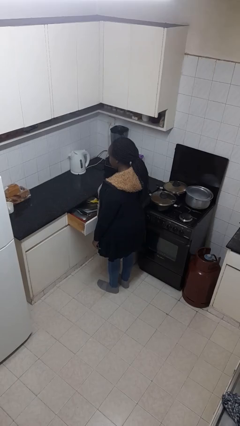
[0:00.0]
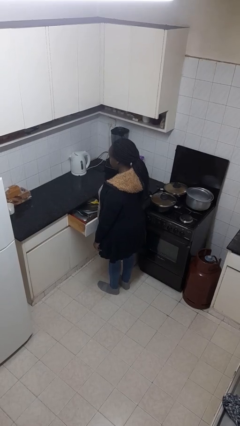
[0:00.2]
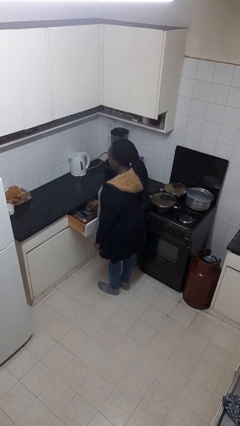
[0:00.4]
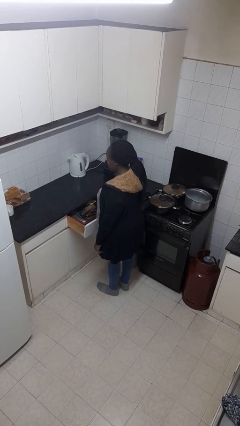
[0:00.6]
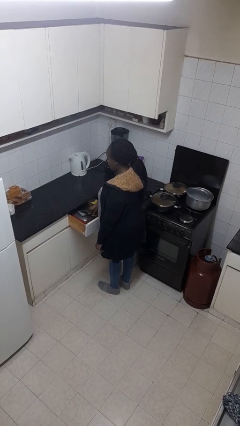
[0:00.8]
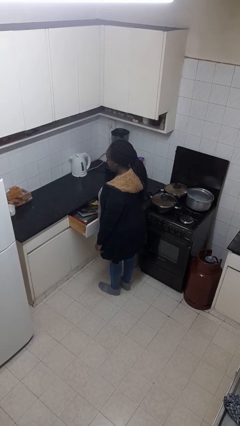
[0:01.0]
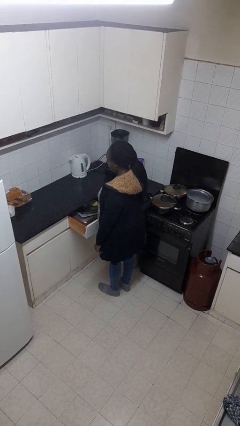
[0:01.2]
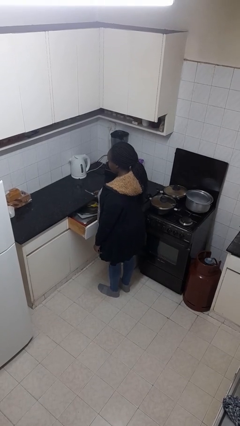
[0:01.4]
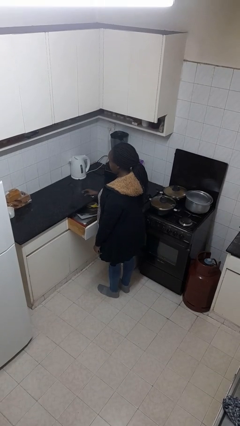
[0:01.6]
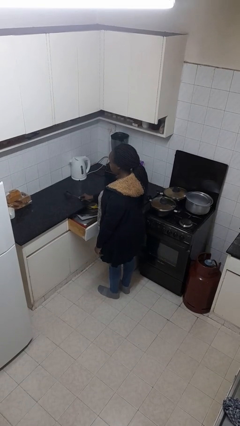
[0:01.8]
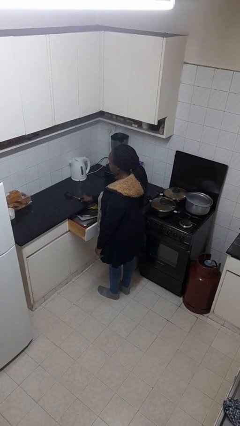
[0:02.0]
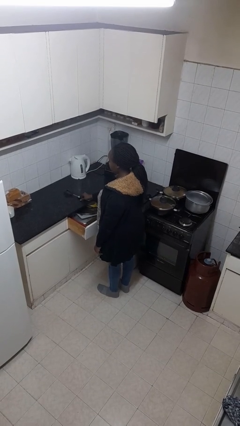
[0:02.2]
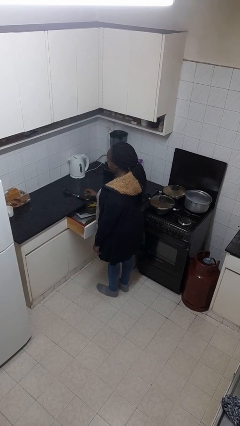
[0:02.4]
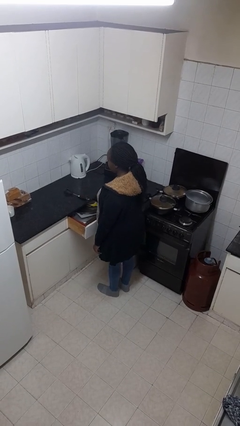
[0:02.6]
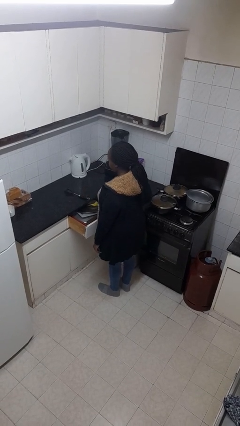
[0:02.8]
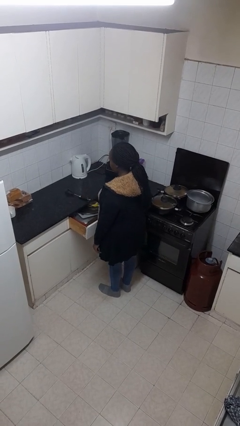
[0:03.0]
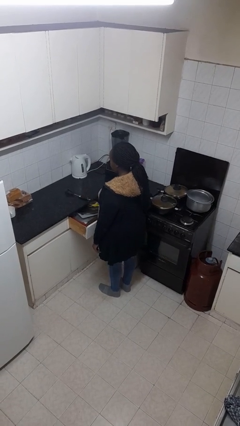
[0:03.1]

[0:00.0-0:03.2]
person takes object from kitchen drawer

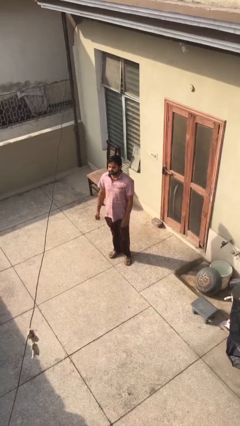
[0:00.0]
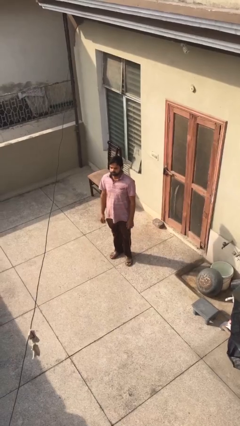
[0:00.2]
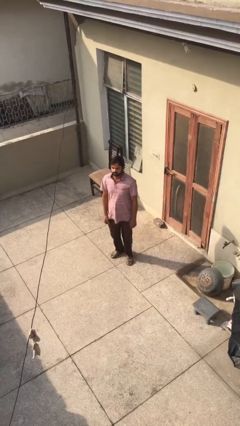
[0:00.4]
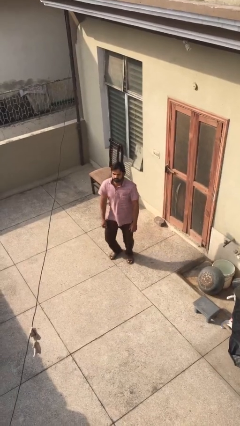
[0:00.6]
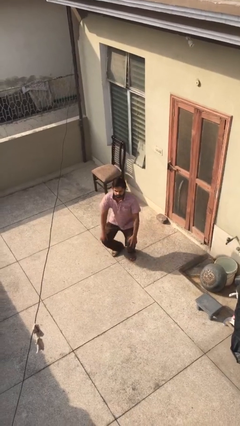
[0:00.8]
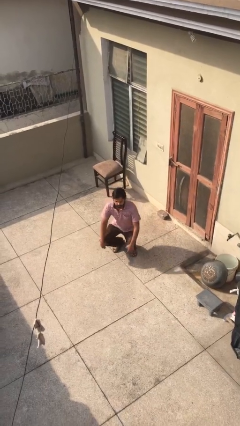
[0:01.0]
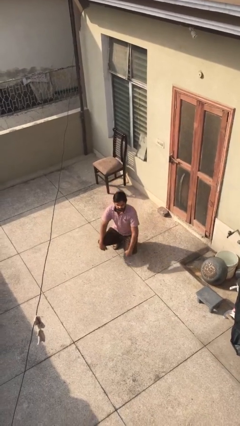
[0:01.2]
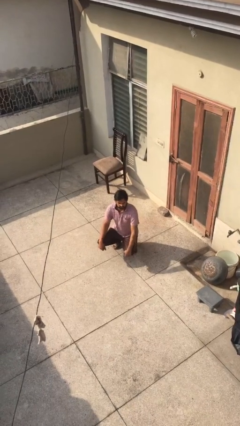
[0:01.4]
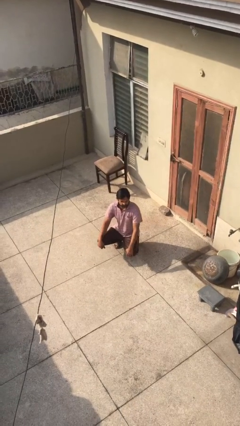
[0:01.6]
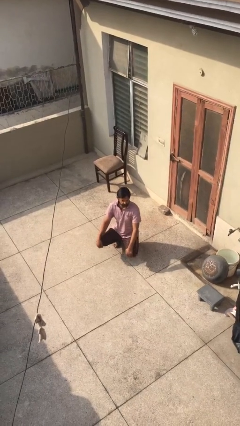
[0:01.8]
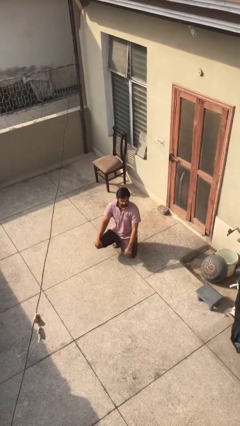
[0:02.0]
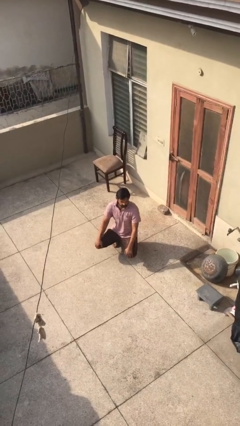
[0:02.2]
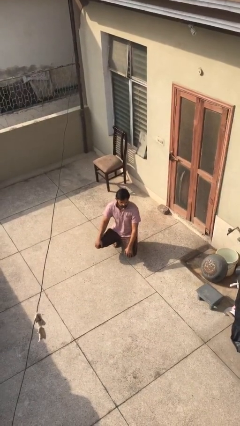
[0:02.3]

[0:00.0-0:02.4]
person sits down

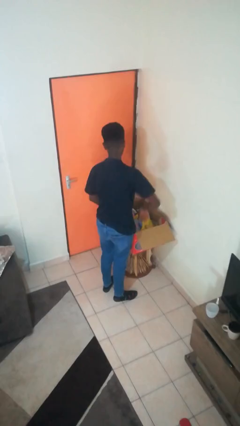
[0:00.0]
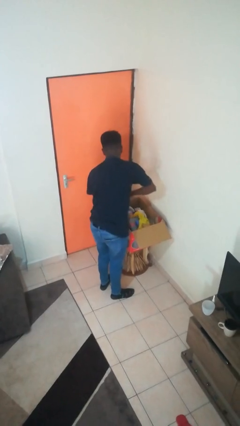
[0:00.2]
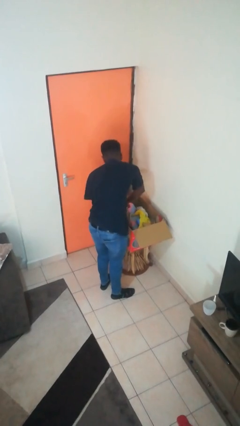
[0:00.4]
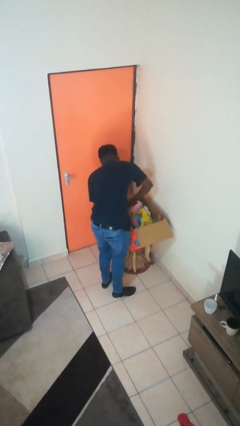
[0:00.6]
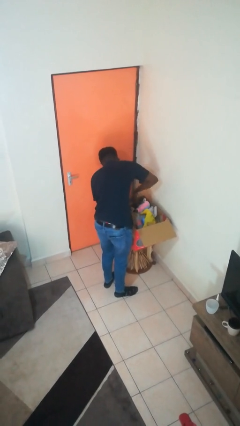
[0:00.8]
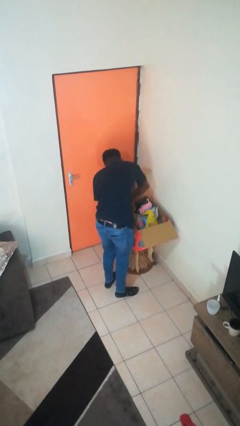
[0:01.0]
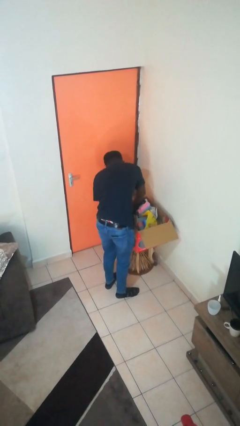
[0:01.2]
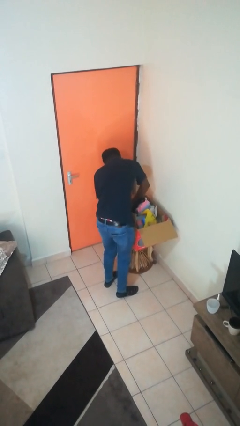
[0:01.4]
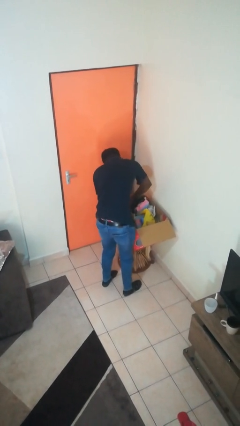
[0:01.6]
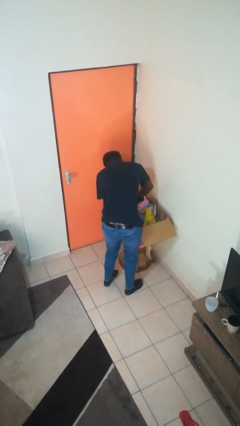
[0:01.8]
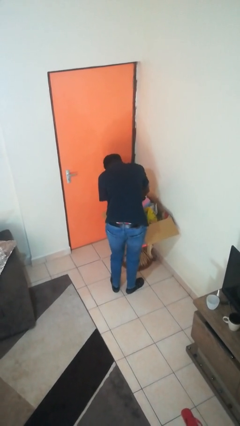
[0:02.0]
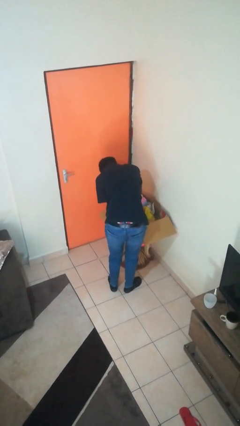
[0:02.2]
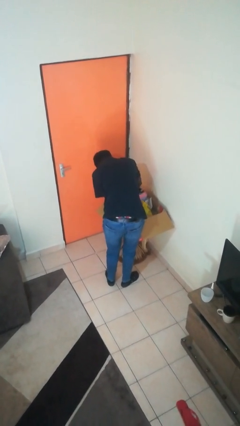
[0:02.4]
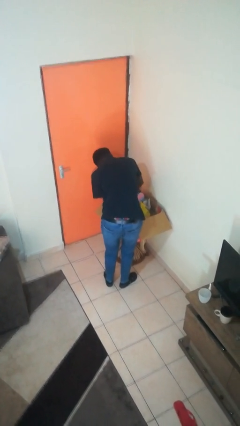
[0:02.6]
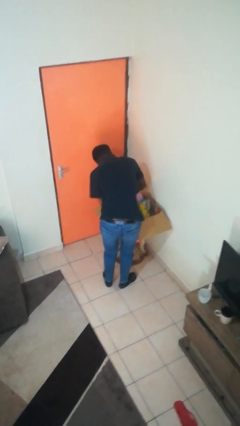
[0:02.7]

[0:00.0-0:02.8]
person searches in box

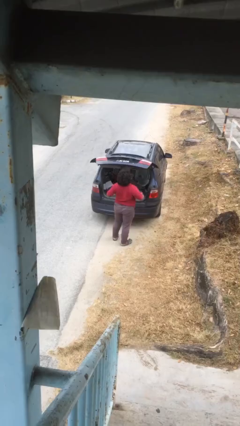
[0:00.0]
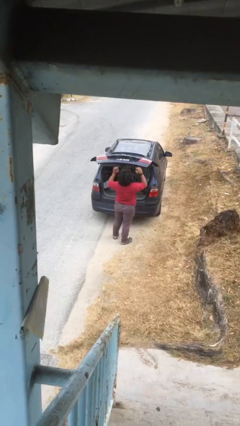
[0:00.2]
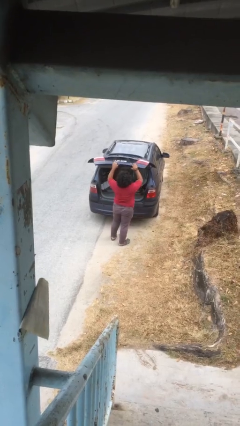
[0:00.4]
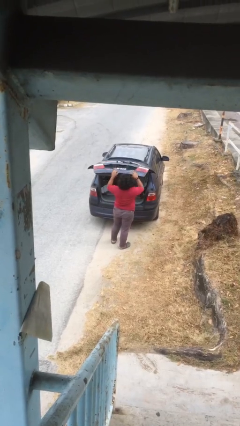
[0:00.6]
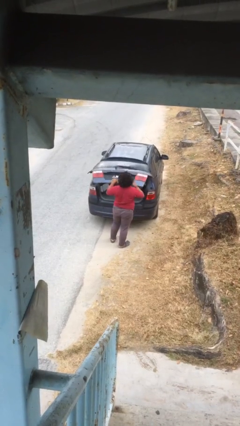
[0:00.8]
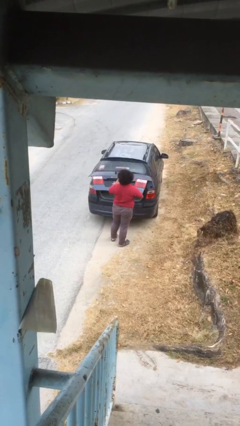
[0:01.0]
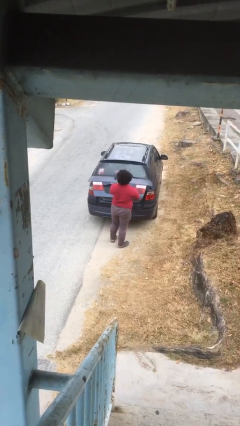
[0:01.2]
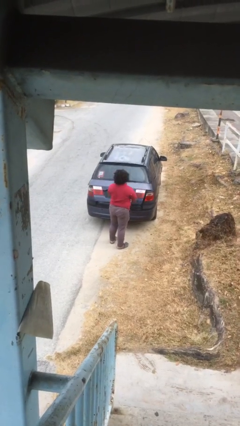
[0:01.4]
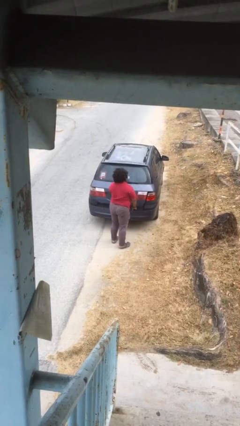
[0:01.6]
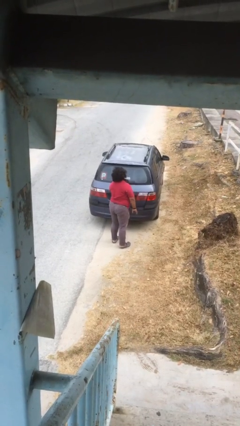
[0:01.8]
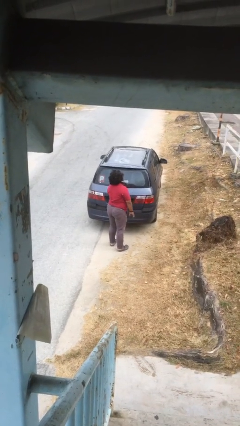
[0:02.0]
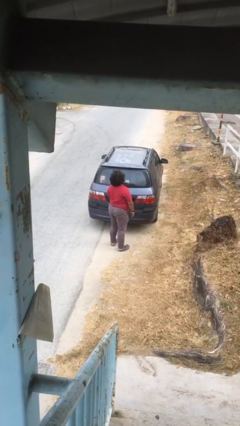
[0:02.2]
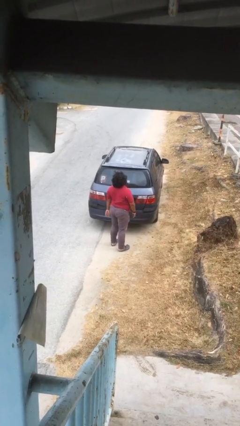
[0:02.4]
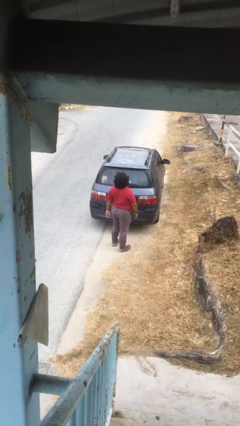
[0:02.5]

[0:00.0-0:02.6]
person closes car trunk

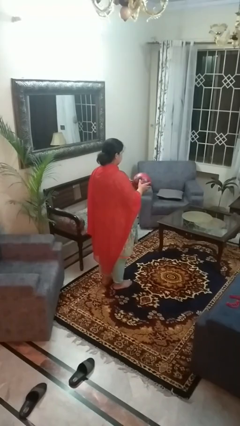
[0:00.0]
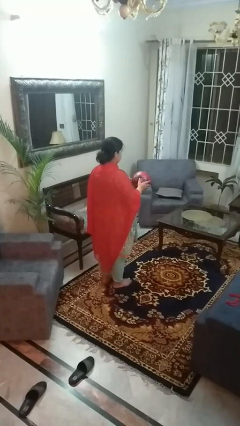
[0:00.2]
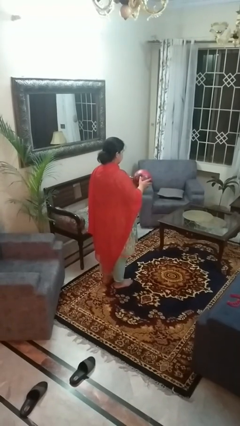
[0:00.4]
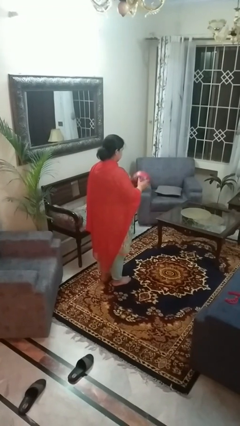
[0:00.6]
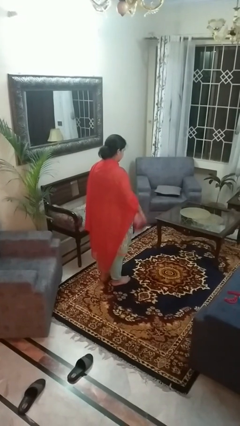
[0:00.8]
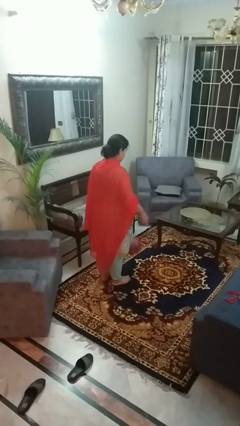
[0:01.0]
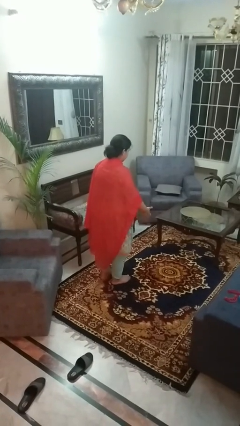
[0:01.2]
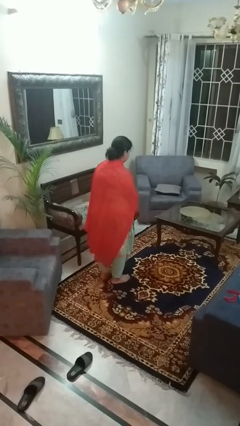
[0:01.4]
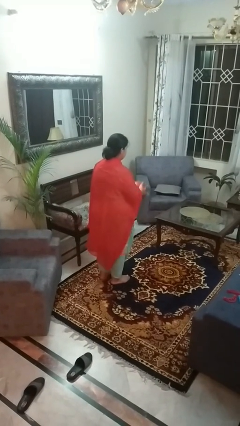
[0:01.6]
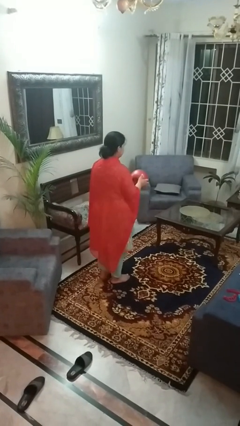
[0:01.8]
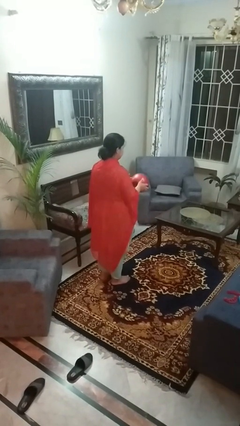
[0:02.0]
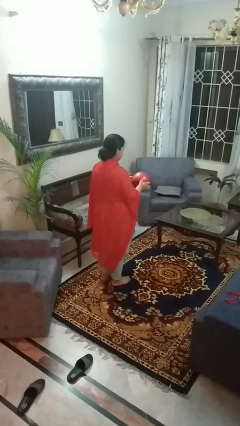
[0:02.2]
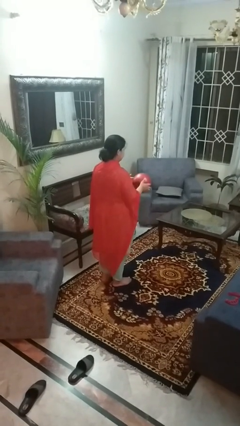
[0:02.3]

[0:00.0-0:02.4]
person bounces ball on floor

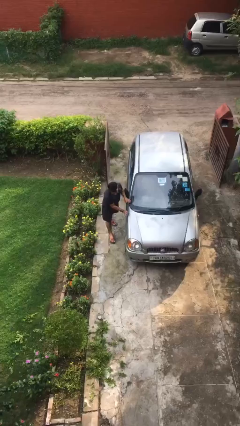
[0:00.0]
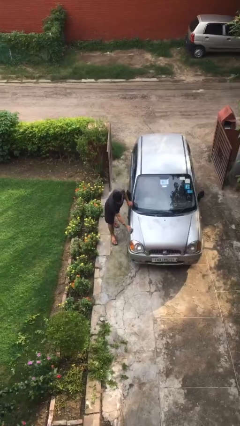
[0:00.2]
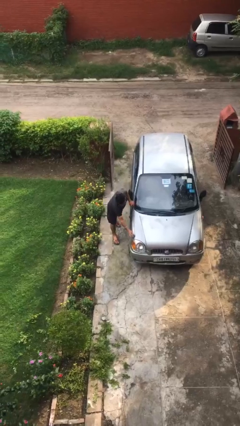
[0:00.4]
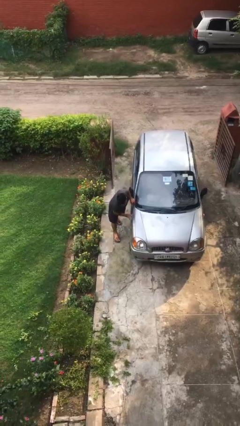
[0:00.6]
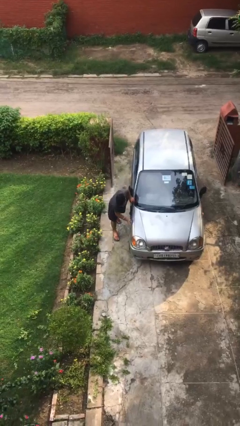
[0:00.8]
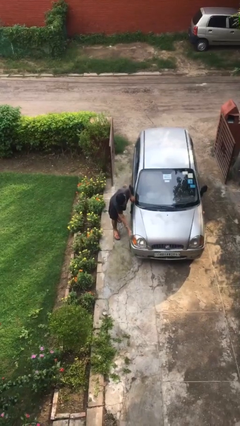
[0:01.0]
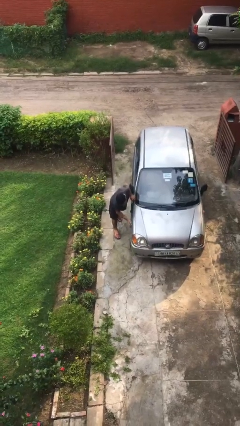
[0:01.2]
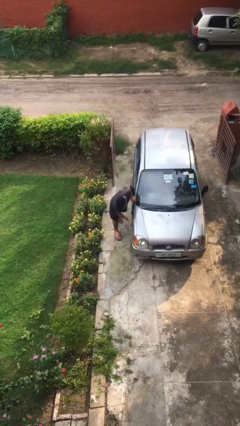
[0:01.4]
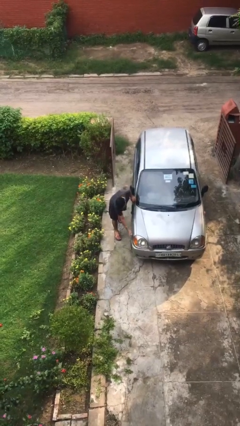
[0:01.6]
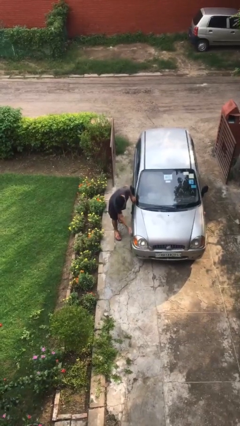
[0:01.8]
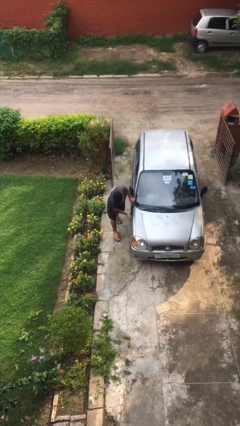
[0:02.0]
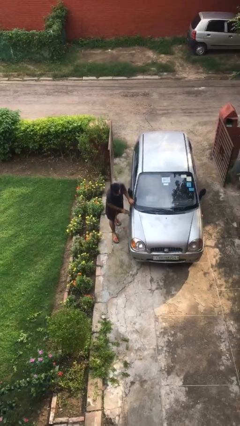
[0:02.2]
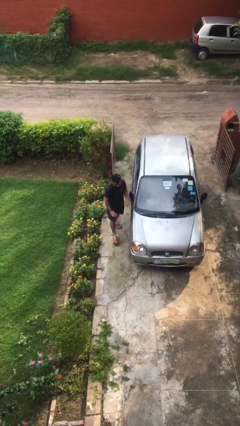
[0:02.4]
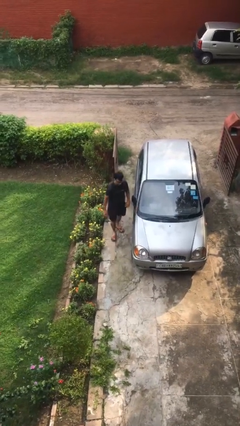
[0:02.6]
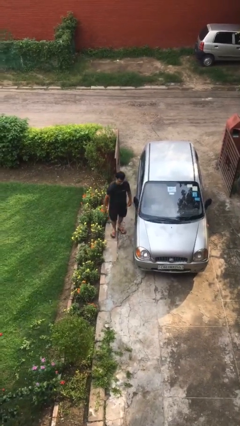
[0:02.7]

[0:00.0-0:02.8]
person polishes car with rag

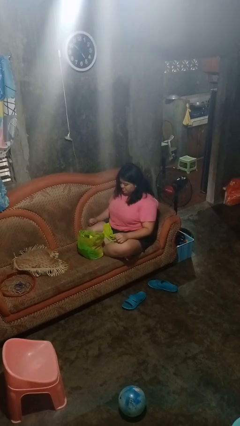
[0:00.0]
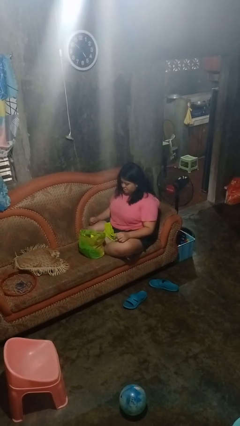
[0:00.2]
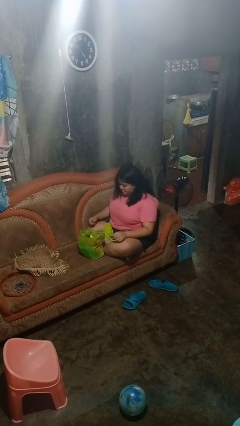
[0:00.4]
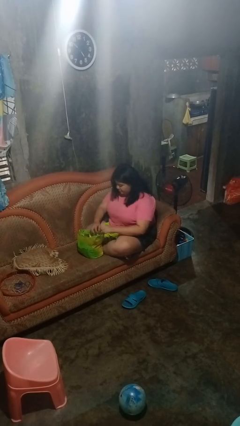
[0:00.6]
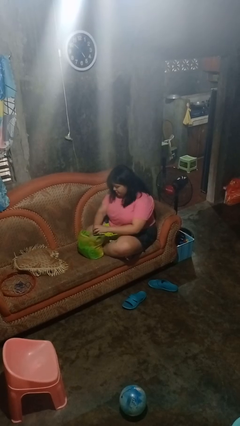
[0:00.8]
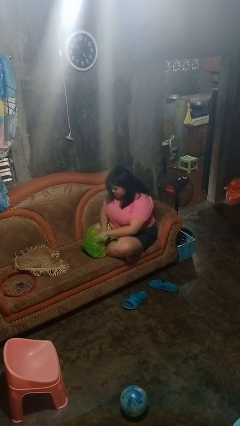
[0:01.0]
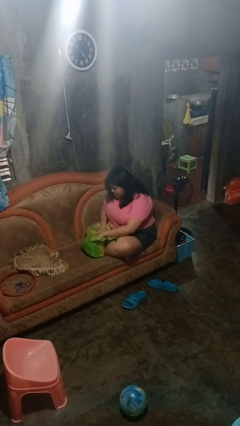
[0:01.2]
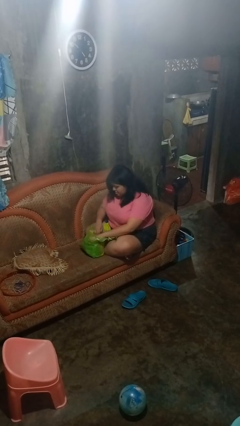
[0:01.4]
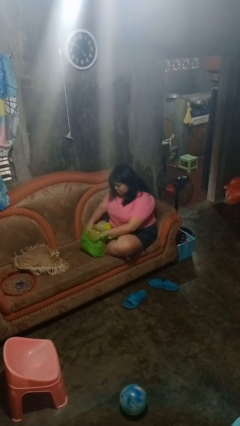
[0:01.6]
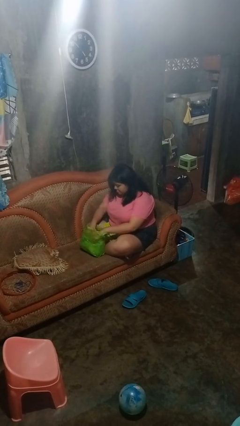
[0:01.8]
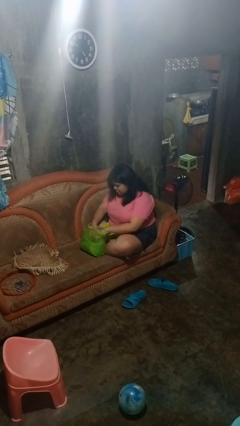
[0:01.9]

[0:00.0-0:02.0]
person searches in bag
